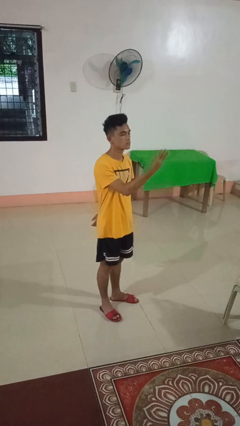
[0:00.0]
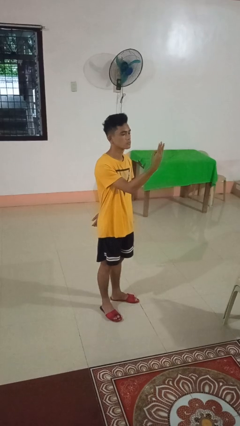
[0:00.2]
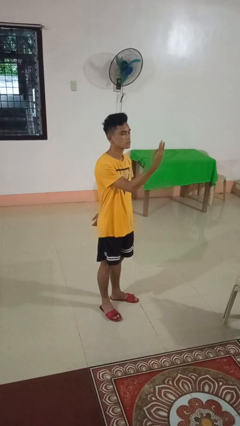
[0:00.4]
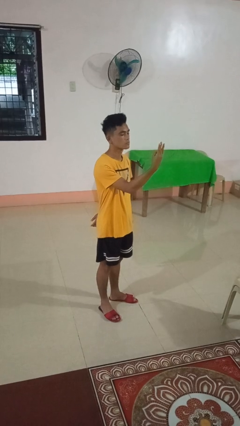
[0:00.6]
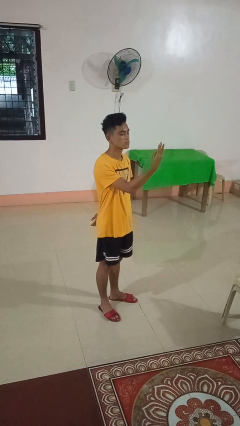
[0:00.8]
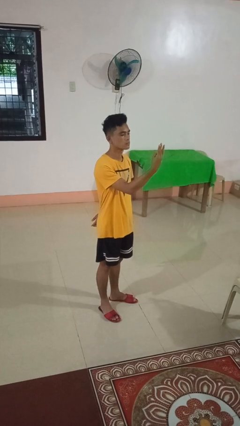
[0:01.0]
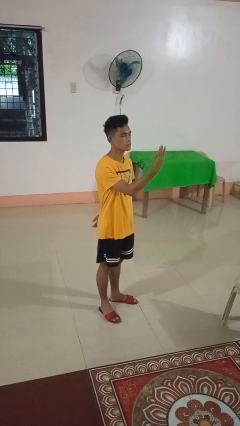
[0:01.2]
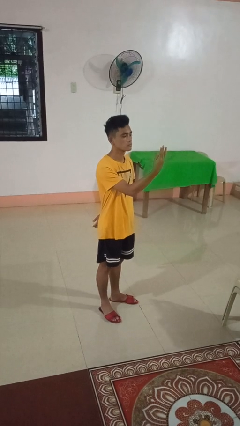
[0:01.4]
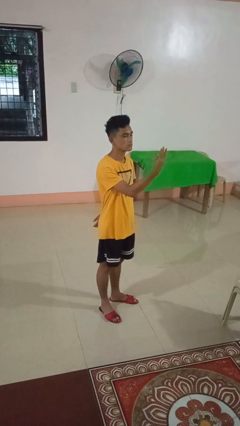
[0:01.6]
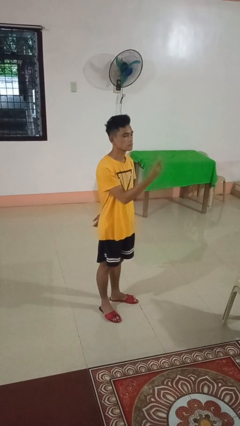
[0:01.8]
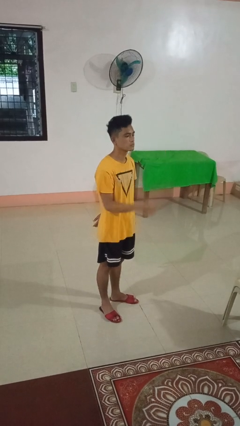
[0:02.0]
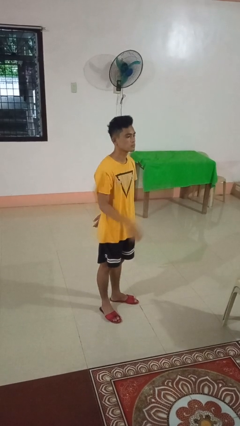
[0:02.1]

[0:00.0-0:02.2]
person gestures number three

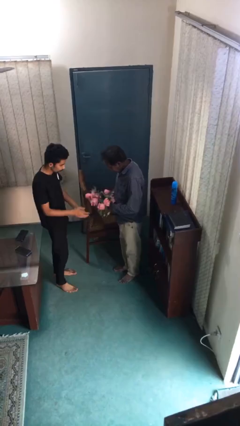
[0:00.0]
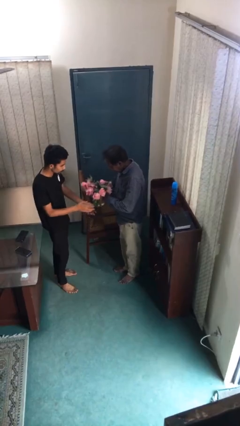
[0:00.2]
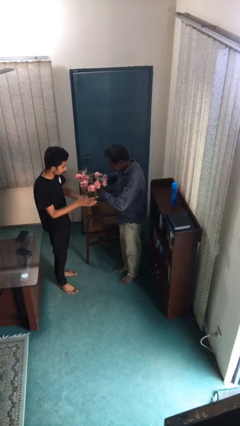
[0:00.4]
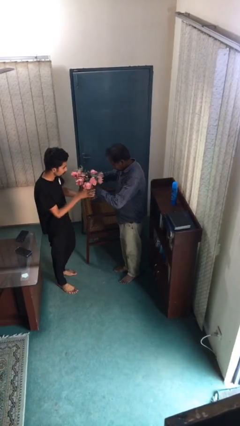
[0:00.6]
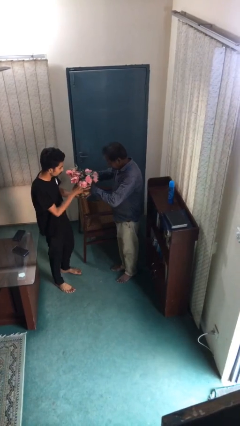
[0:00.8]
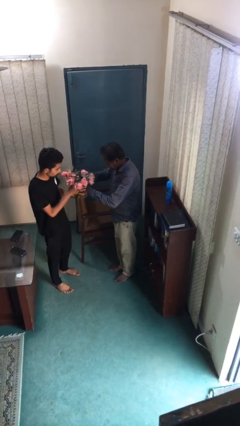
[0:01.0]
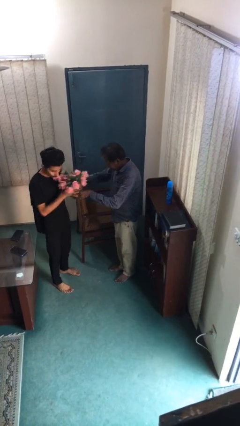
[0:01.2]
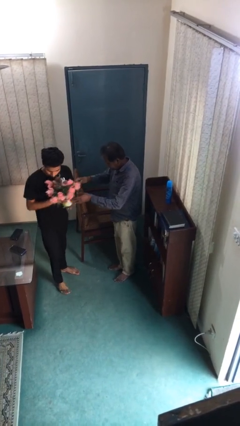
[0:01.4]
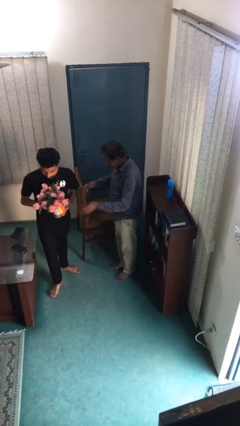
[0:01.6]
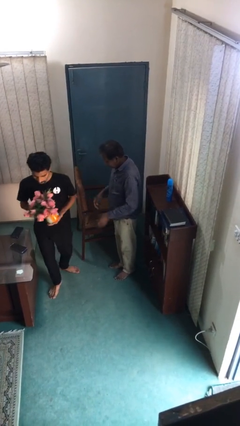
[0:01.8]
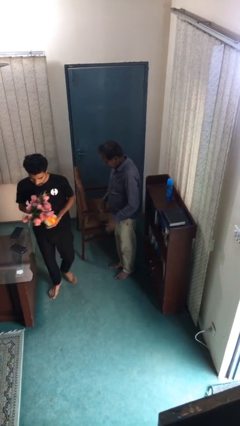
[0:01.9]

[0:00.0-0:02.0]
person transfers object to person

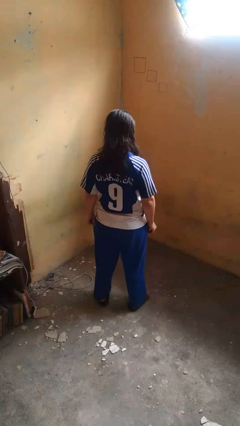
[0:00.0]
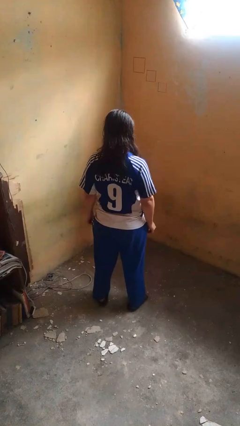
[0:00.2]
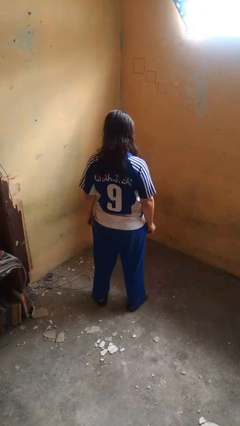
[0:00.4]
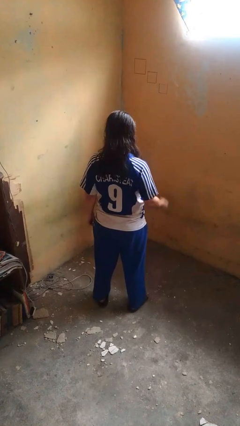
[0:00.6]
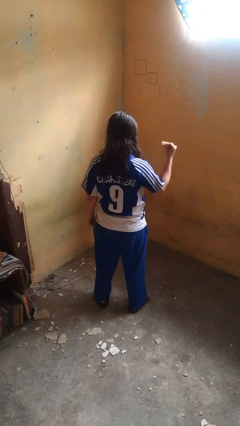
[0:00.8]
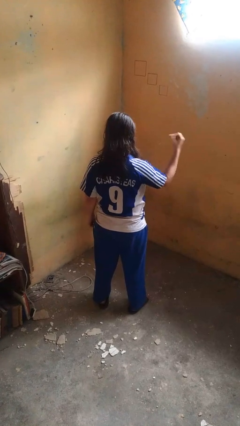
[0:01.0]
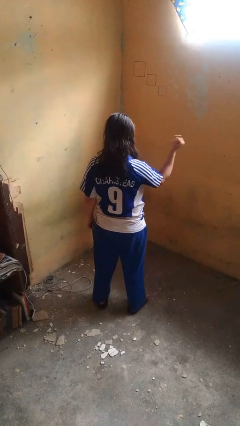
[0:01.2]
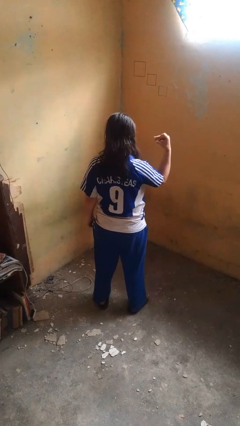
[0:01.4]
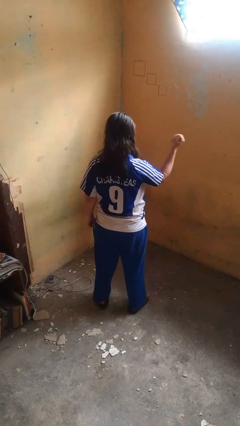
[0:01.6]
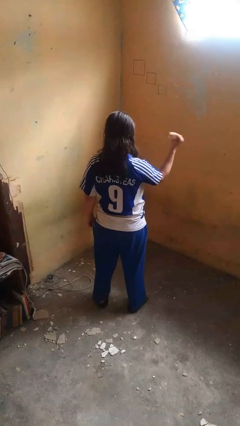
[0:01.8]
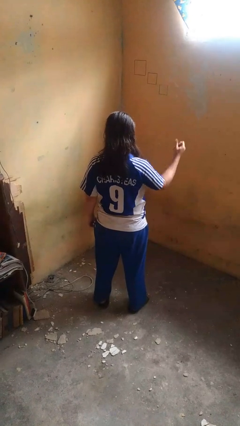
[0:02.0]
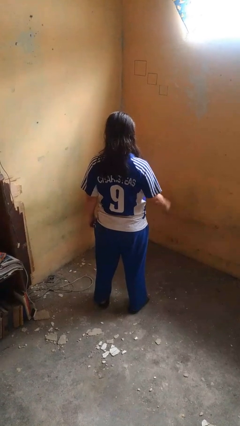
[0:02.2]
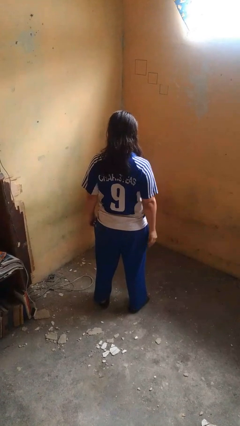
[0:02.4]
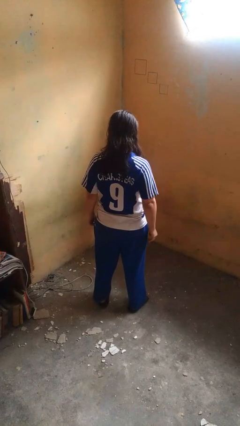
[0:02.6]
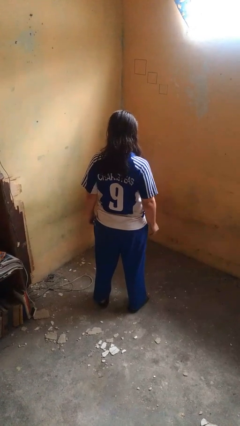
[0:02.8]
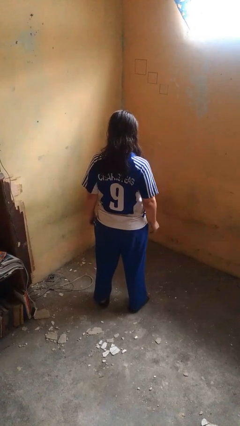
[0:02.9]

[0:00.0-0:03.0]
person snaps fingers

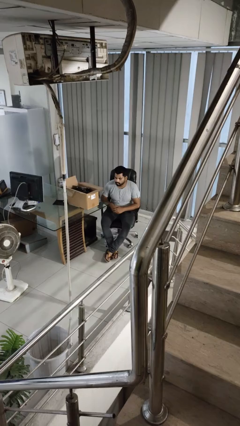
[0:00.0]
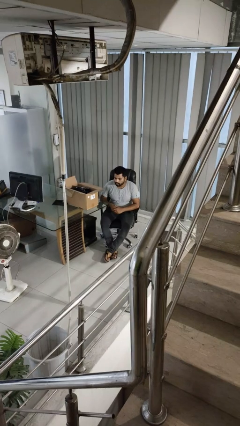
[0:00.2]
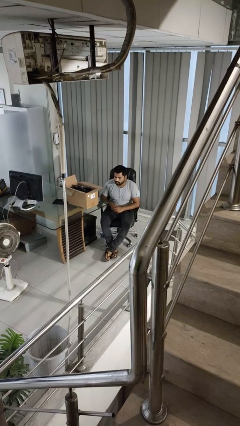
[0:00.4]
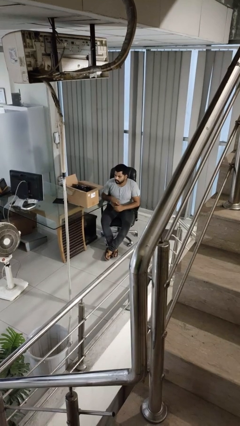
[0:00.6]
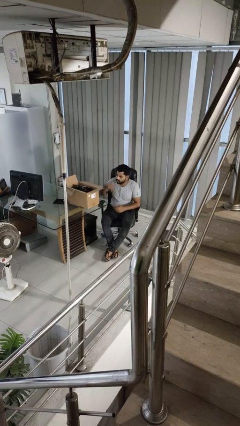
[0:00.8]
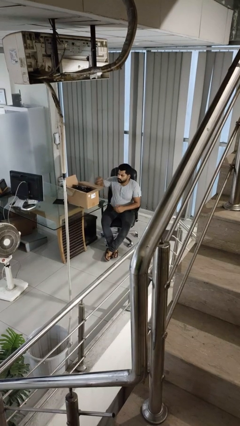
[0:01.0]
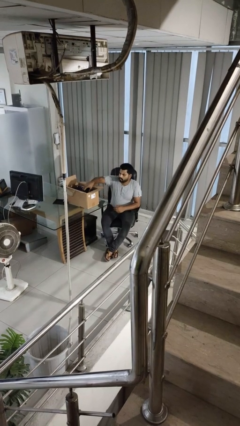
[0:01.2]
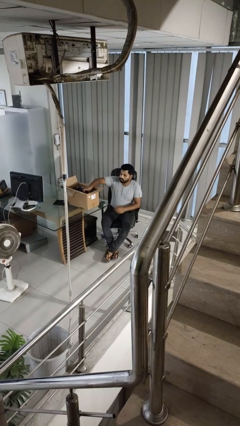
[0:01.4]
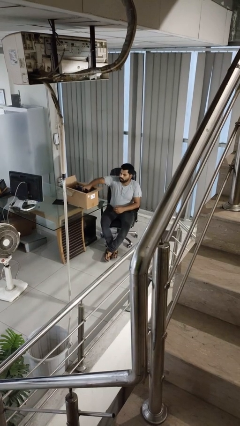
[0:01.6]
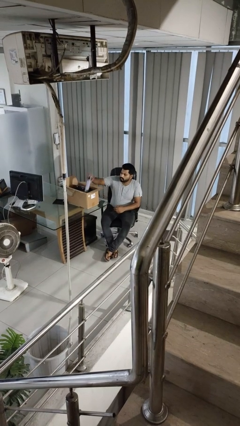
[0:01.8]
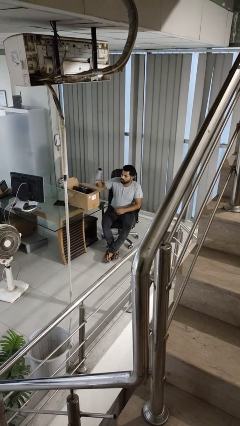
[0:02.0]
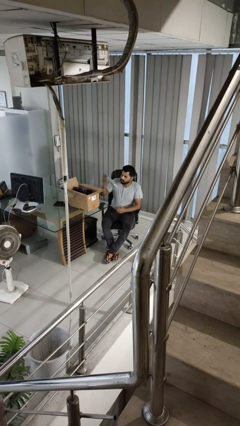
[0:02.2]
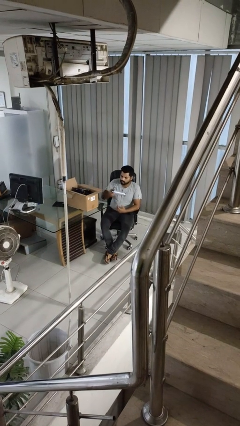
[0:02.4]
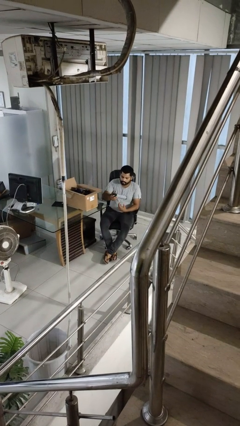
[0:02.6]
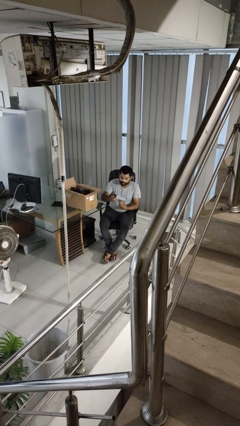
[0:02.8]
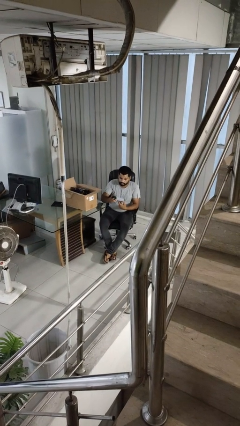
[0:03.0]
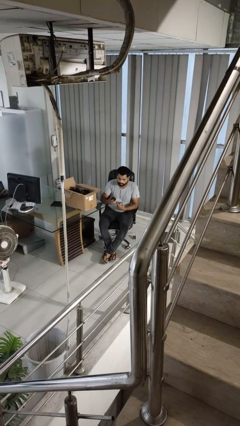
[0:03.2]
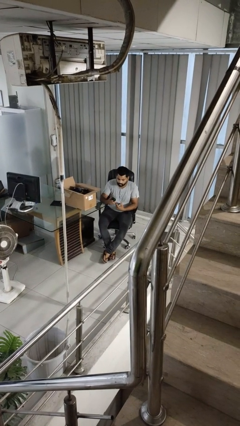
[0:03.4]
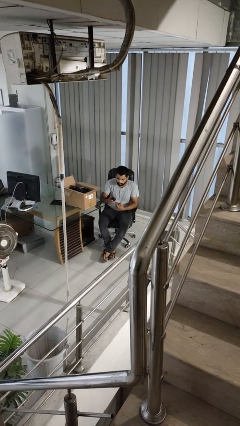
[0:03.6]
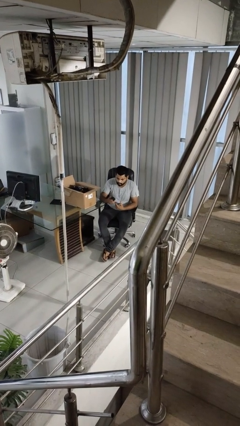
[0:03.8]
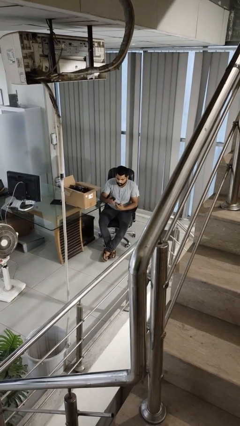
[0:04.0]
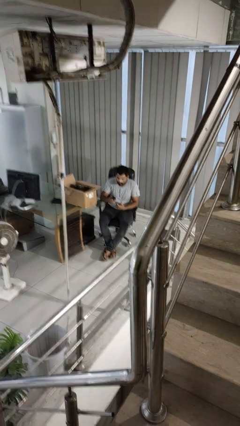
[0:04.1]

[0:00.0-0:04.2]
person takes object from box

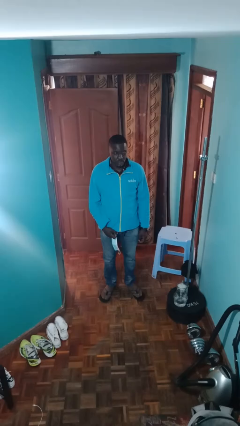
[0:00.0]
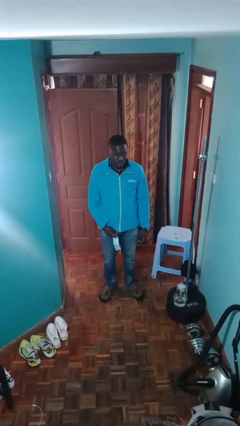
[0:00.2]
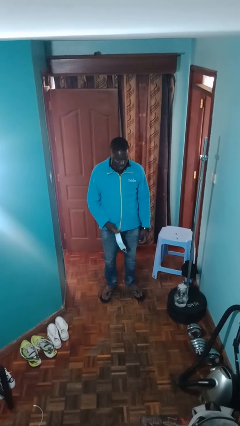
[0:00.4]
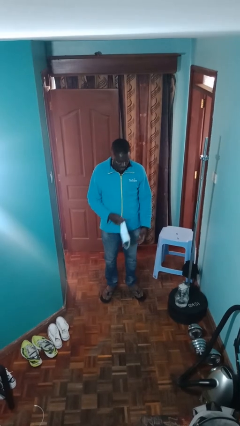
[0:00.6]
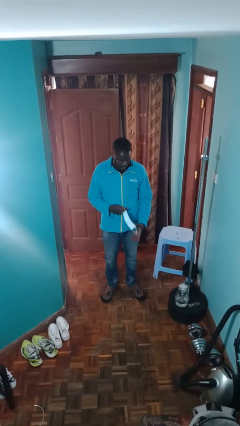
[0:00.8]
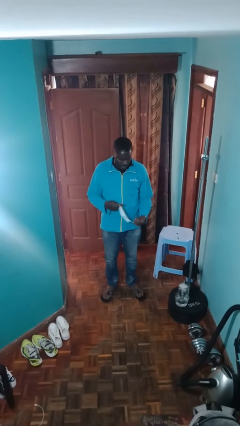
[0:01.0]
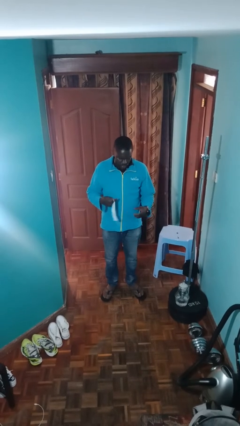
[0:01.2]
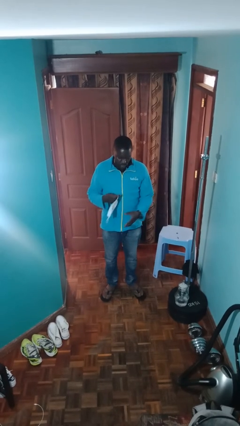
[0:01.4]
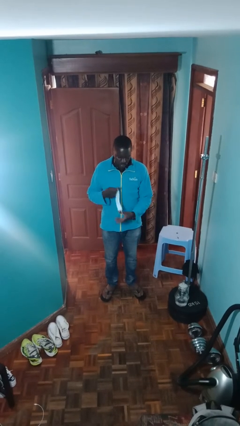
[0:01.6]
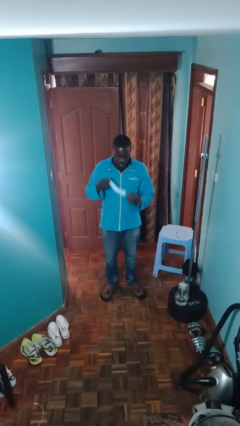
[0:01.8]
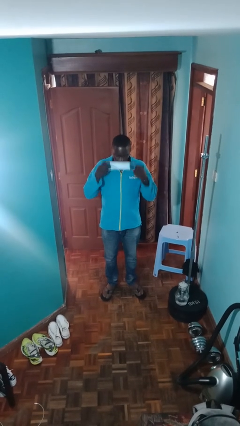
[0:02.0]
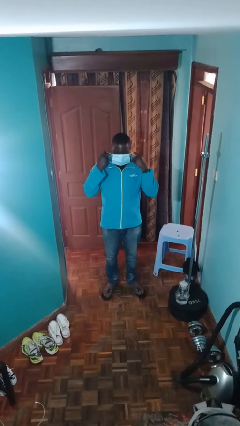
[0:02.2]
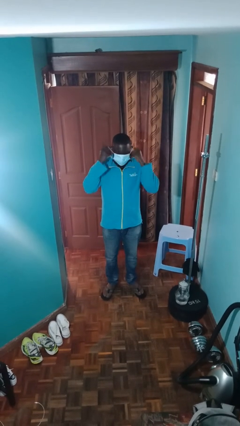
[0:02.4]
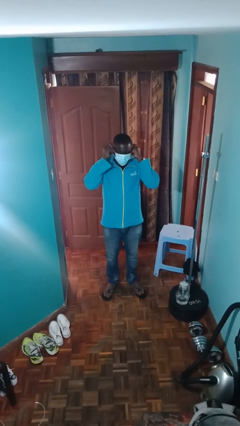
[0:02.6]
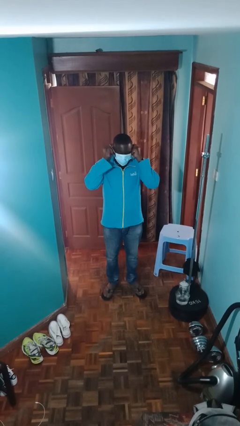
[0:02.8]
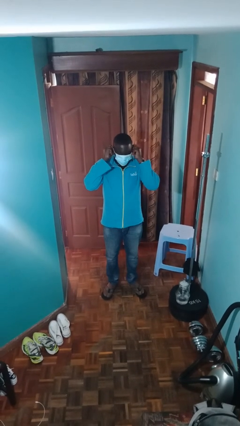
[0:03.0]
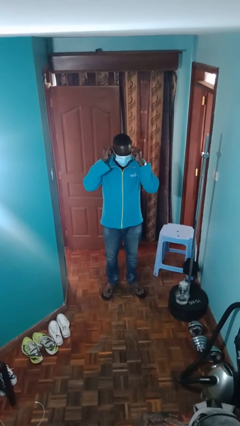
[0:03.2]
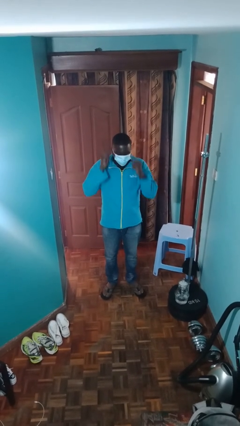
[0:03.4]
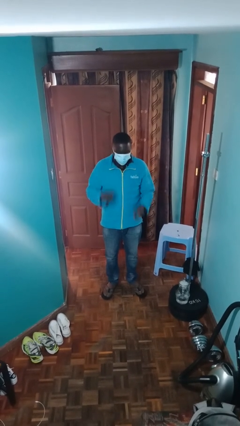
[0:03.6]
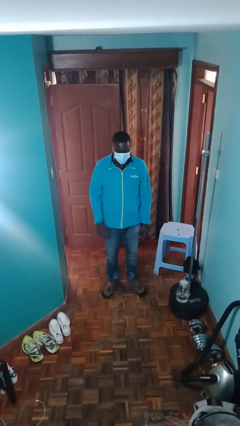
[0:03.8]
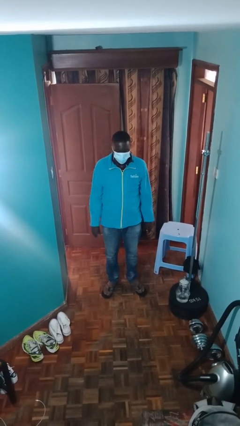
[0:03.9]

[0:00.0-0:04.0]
person puts on facemask

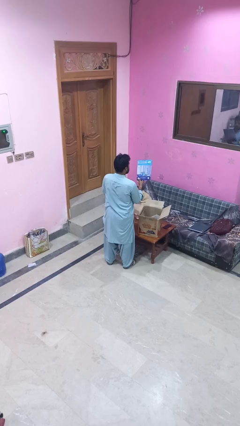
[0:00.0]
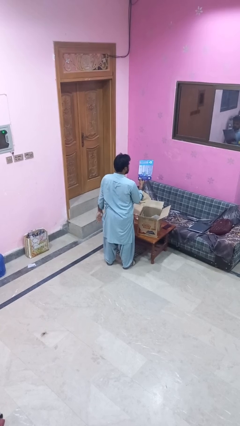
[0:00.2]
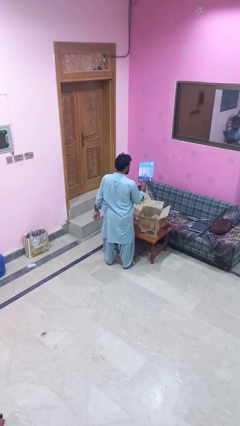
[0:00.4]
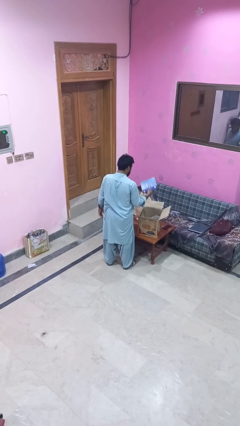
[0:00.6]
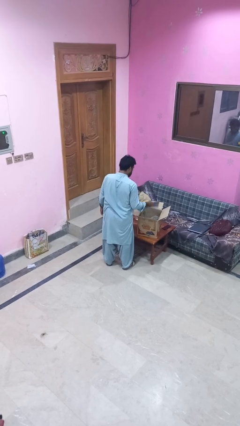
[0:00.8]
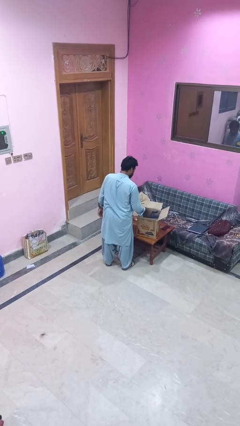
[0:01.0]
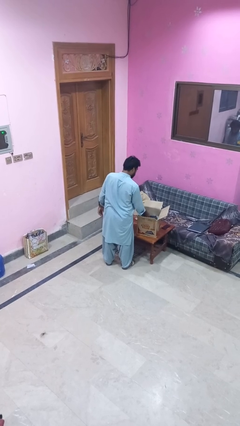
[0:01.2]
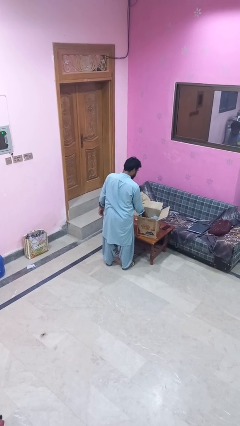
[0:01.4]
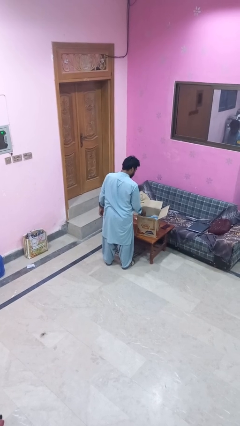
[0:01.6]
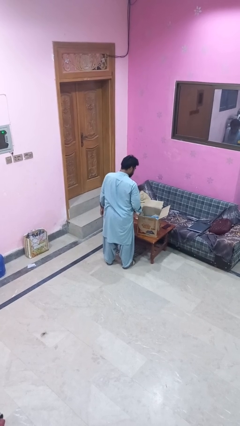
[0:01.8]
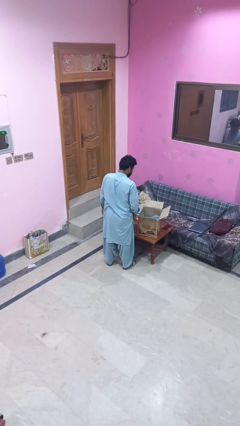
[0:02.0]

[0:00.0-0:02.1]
person puts object into box

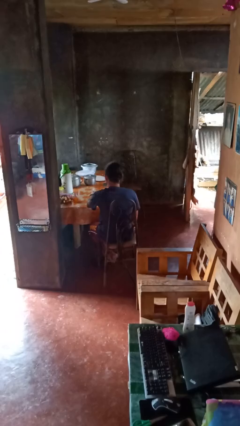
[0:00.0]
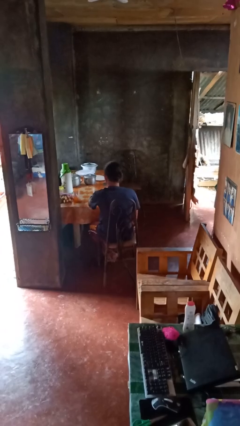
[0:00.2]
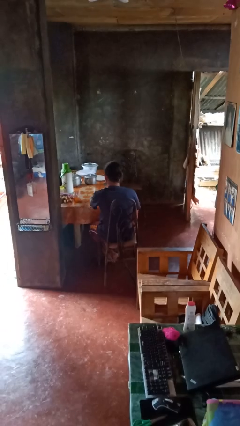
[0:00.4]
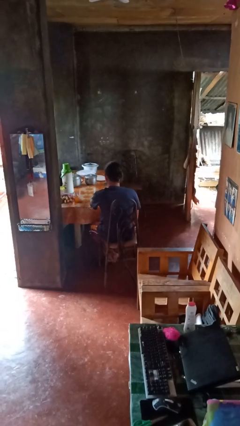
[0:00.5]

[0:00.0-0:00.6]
person puts down object on table
